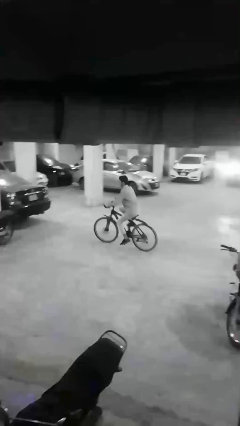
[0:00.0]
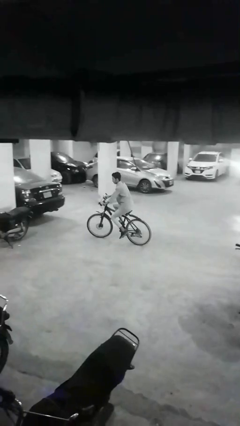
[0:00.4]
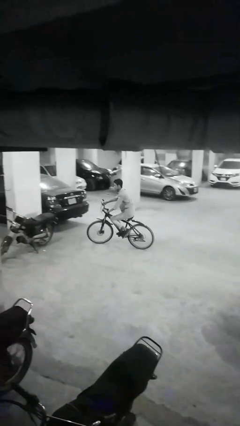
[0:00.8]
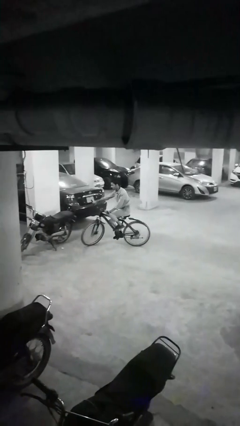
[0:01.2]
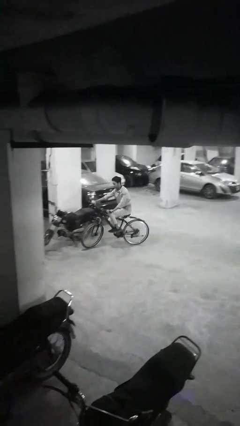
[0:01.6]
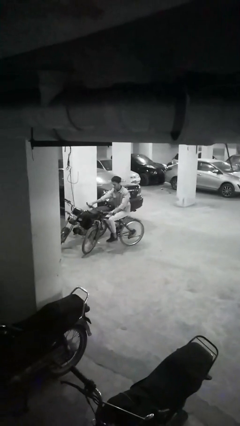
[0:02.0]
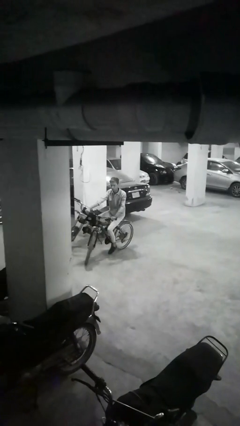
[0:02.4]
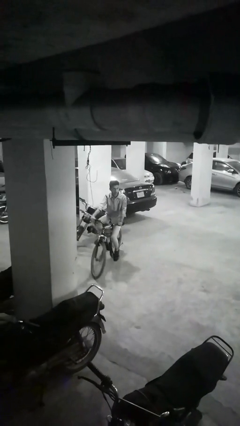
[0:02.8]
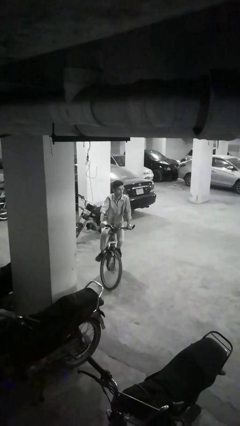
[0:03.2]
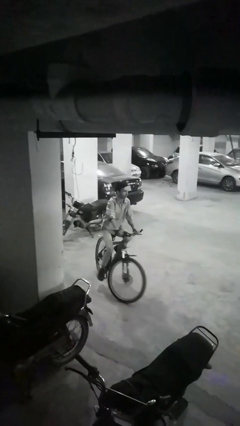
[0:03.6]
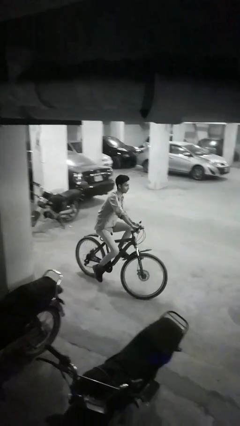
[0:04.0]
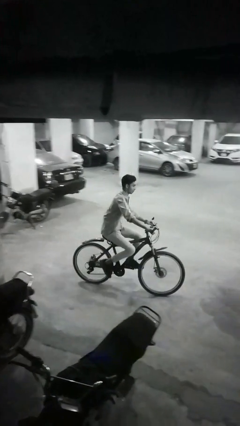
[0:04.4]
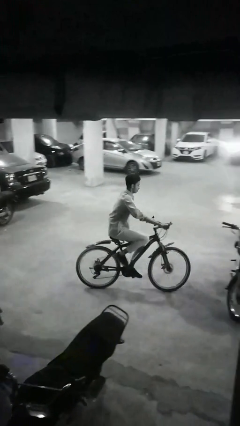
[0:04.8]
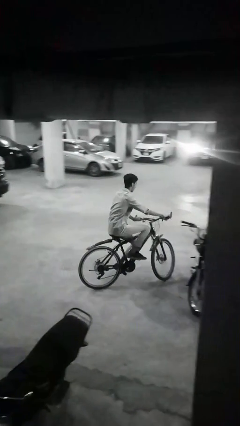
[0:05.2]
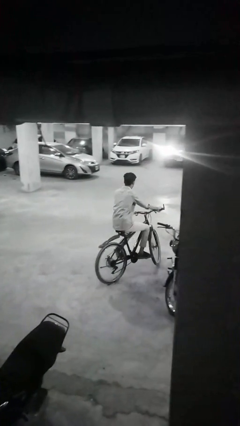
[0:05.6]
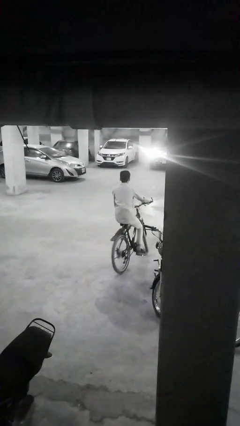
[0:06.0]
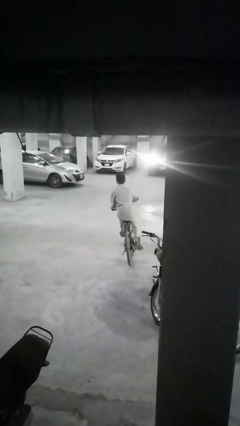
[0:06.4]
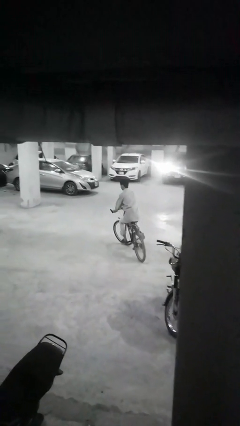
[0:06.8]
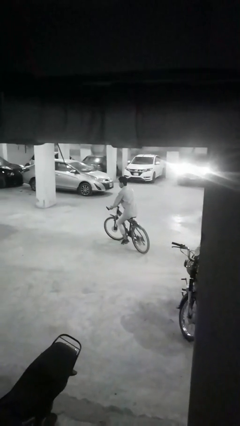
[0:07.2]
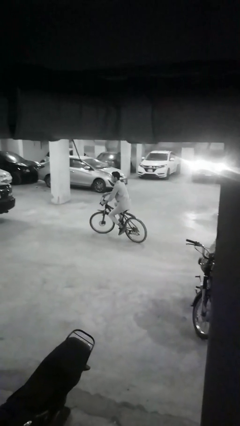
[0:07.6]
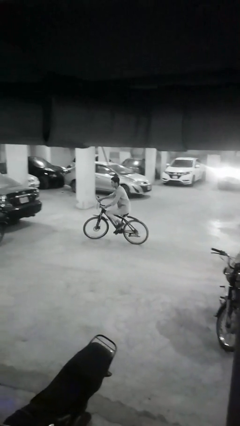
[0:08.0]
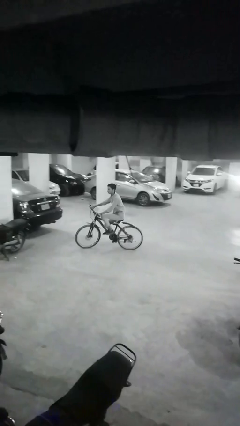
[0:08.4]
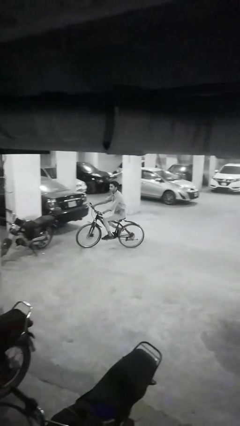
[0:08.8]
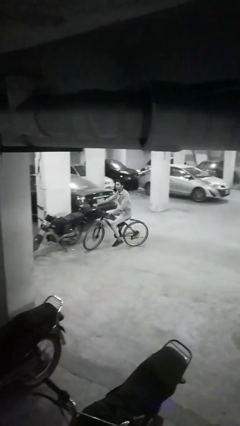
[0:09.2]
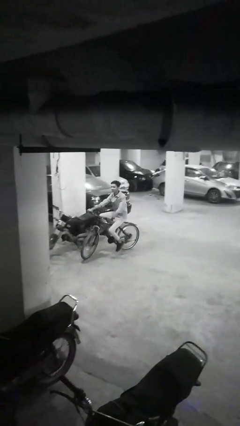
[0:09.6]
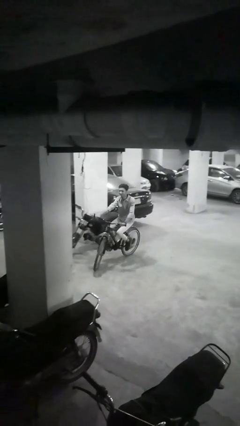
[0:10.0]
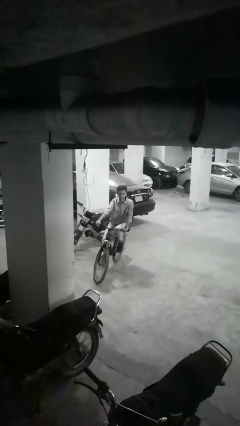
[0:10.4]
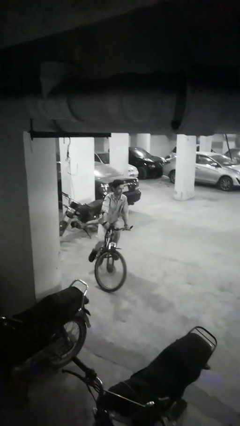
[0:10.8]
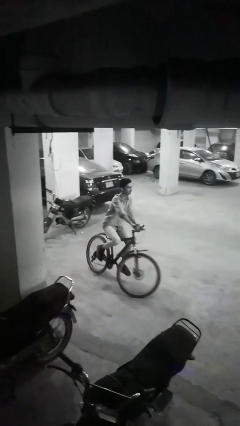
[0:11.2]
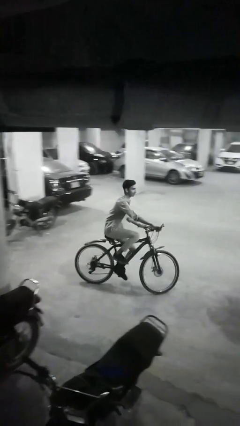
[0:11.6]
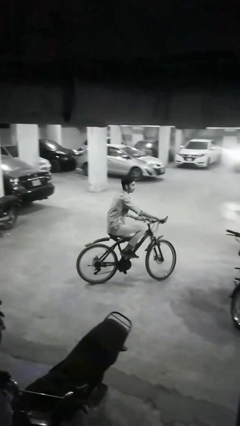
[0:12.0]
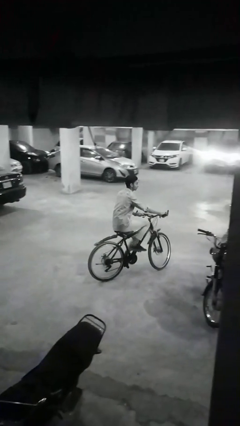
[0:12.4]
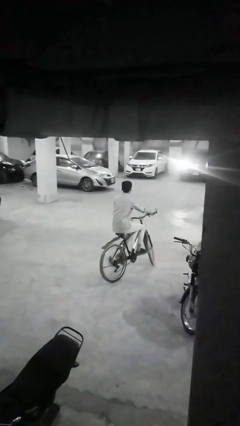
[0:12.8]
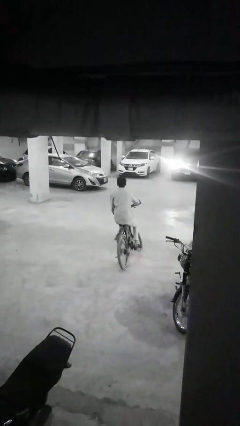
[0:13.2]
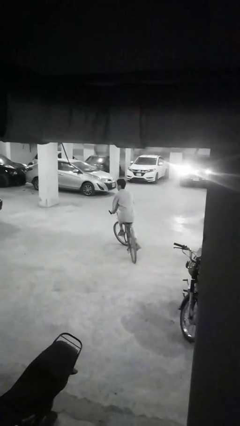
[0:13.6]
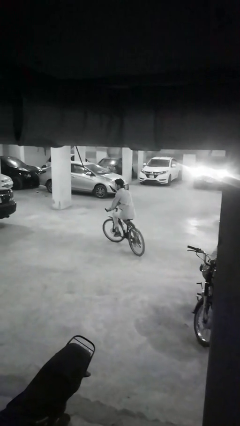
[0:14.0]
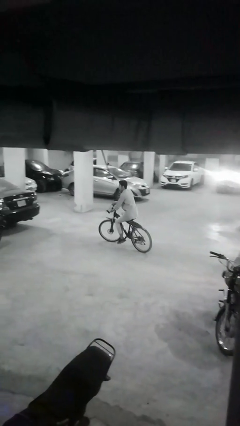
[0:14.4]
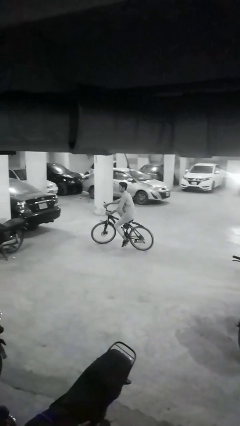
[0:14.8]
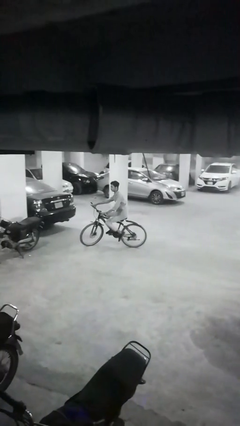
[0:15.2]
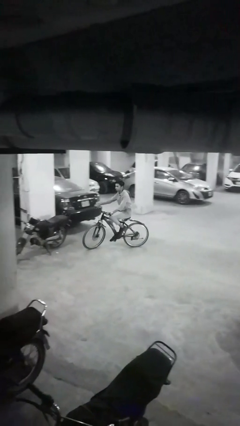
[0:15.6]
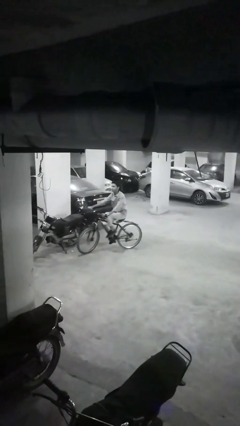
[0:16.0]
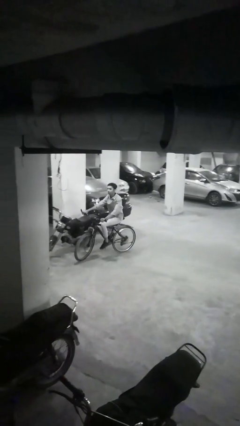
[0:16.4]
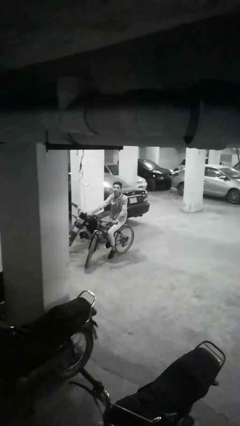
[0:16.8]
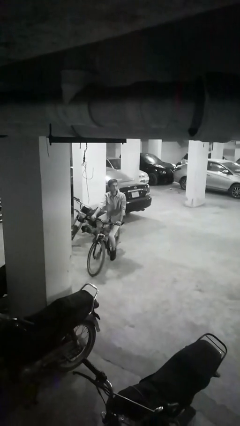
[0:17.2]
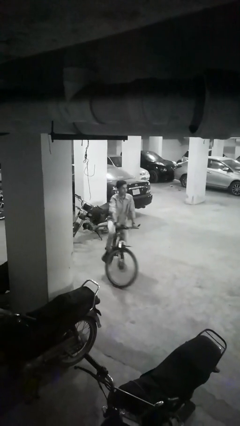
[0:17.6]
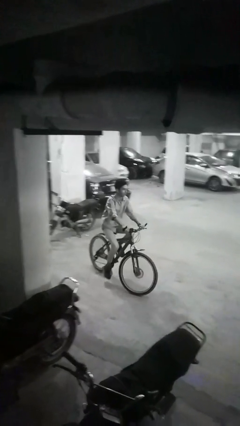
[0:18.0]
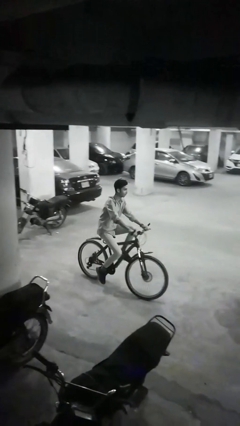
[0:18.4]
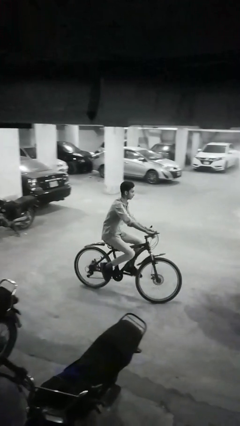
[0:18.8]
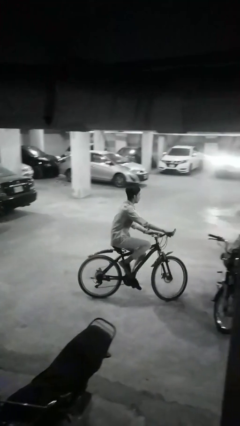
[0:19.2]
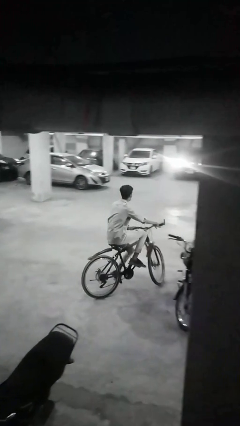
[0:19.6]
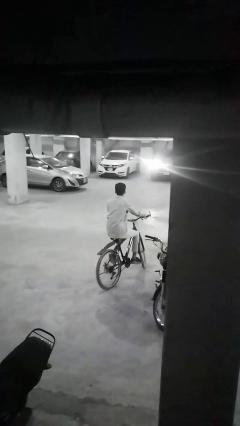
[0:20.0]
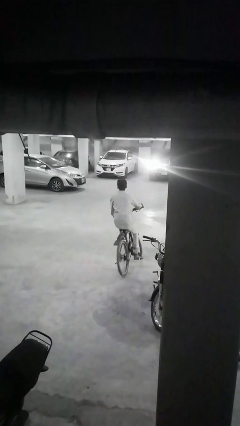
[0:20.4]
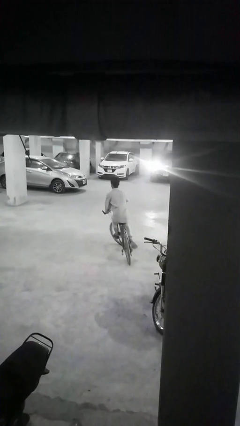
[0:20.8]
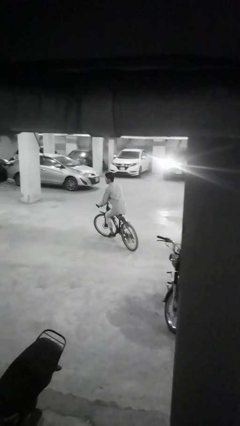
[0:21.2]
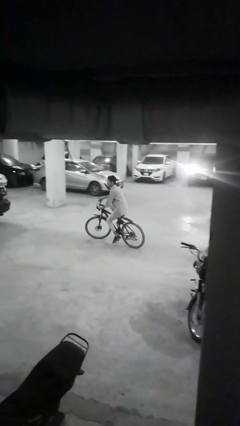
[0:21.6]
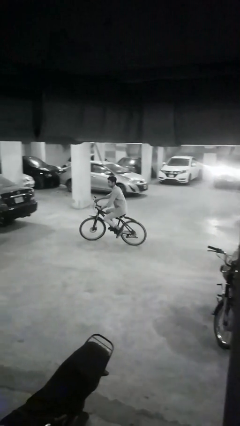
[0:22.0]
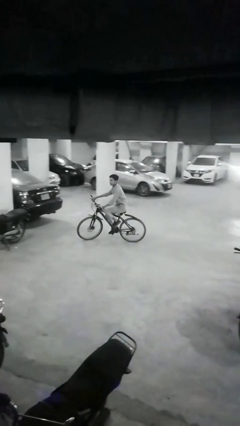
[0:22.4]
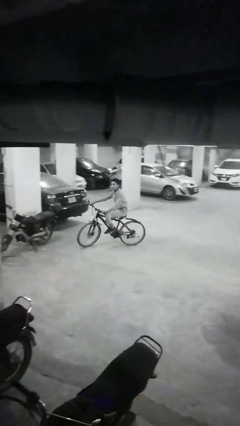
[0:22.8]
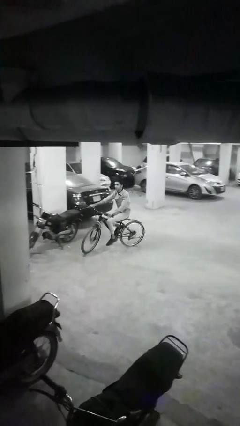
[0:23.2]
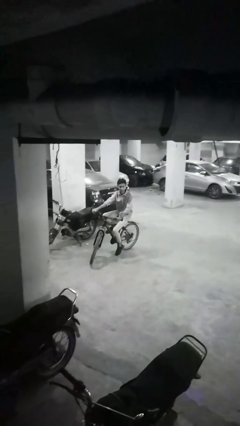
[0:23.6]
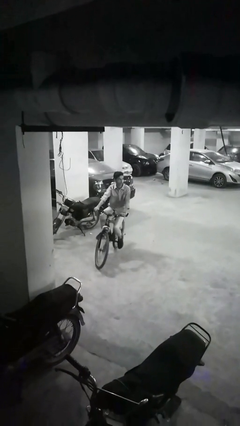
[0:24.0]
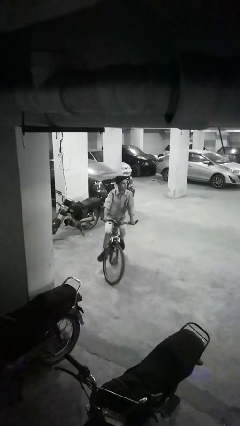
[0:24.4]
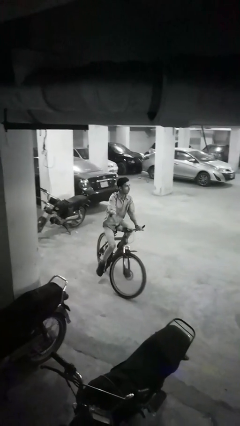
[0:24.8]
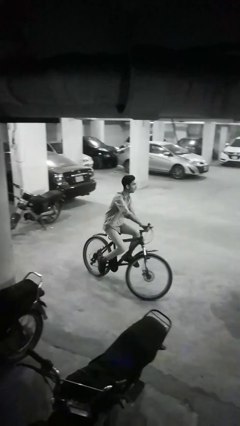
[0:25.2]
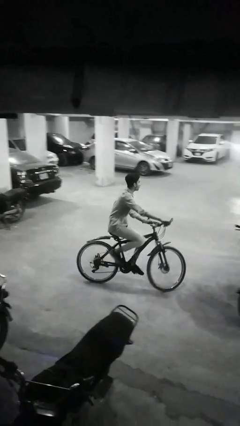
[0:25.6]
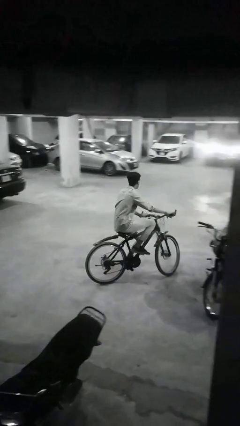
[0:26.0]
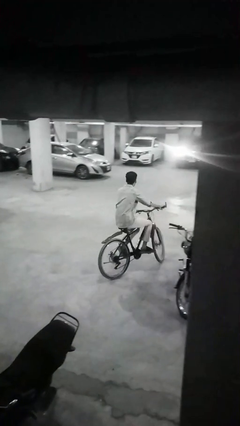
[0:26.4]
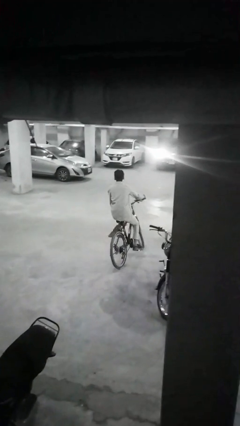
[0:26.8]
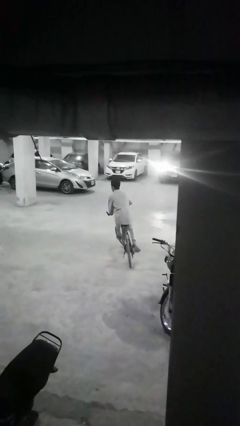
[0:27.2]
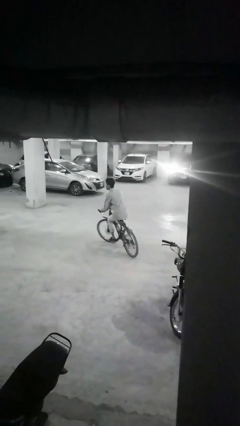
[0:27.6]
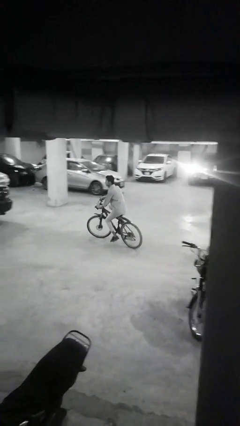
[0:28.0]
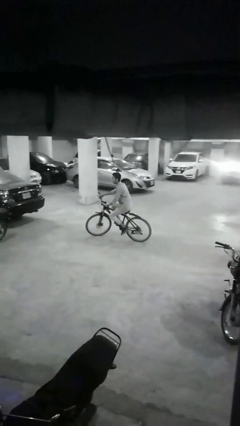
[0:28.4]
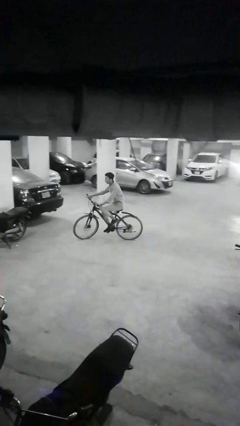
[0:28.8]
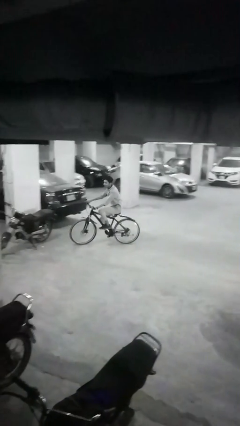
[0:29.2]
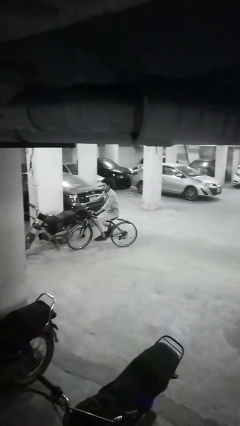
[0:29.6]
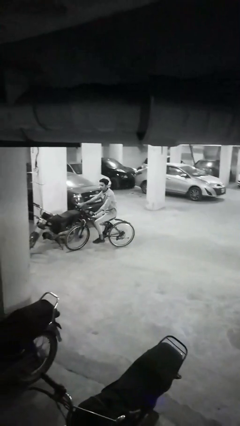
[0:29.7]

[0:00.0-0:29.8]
person rides bicycle

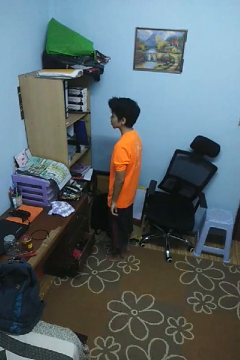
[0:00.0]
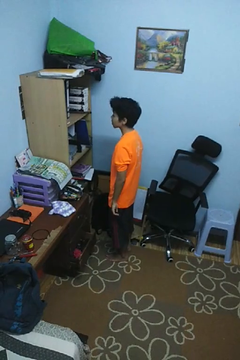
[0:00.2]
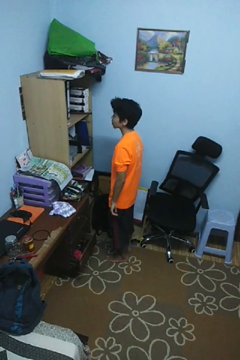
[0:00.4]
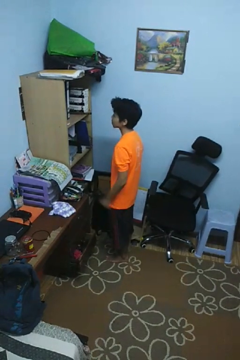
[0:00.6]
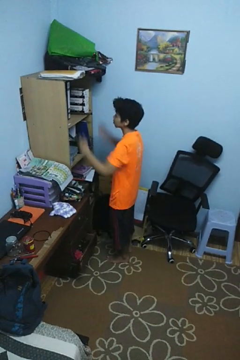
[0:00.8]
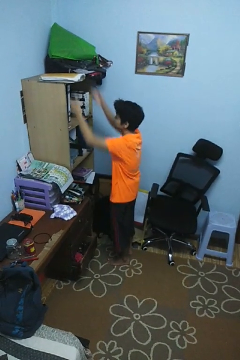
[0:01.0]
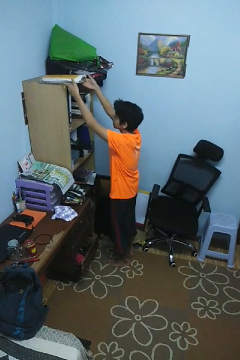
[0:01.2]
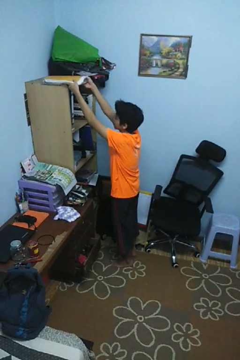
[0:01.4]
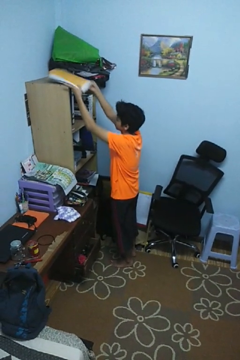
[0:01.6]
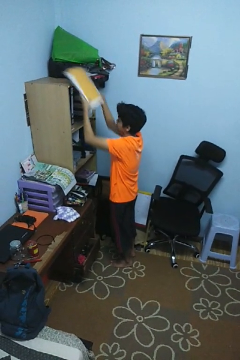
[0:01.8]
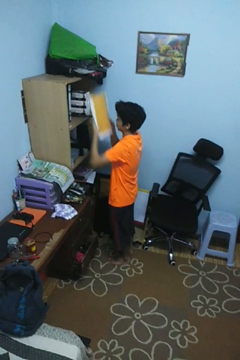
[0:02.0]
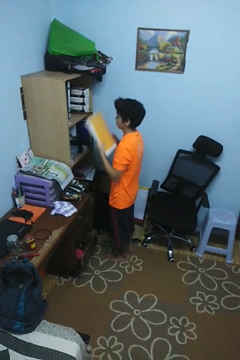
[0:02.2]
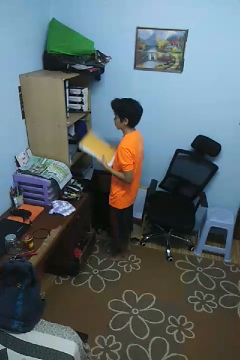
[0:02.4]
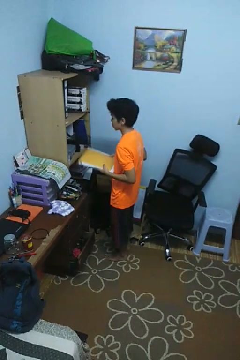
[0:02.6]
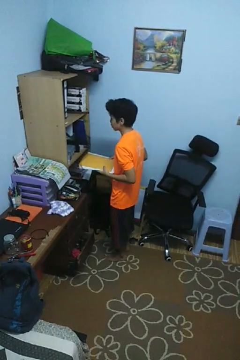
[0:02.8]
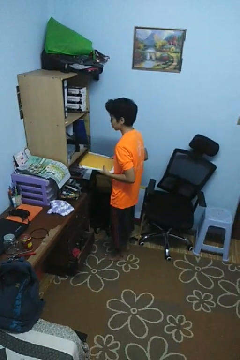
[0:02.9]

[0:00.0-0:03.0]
person picks up object from shelf

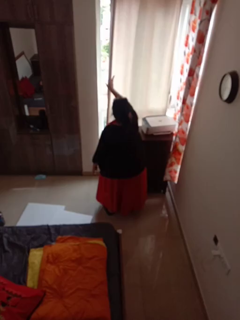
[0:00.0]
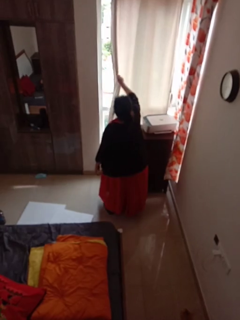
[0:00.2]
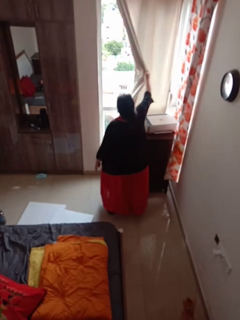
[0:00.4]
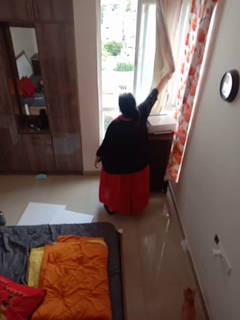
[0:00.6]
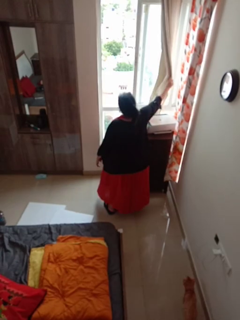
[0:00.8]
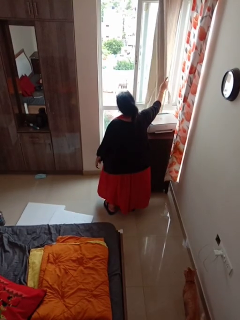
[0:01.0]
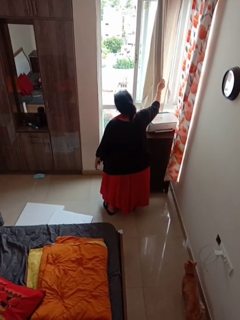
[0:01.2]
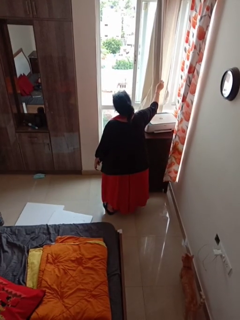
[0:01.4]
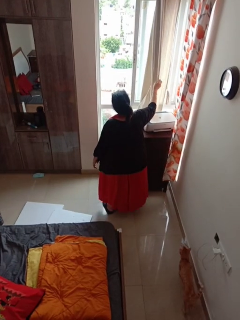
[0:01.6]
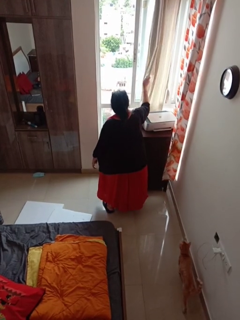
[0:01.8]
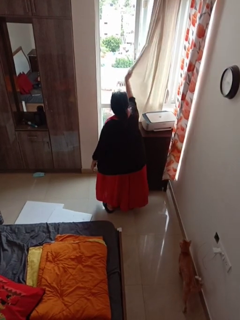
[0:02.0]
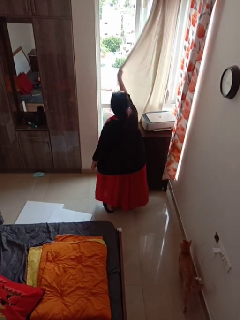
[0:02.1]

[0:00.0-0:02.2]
person opens curtains
